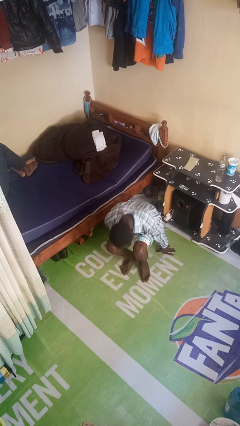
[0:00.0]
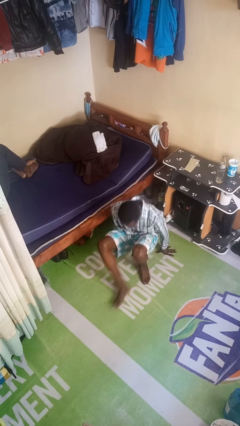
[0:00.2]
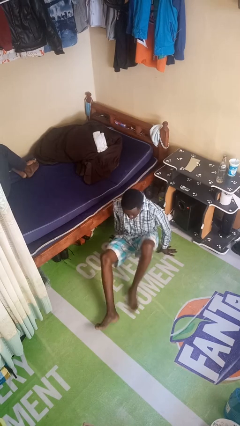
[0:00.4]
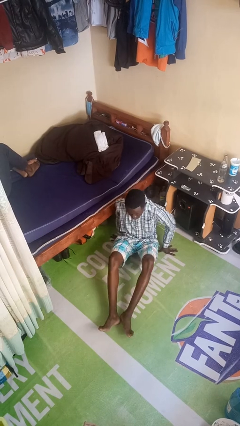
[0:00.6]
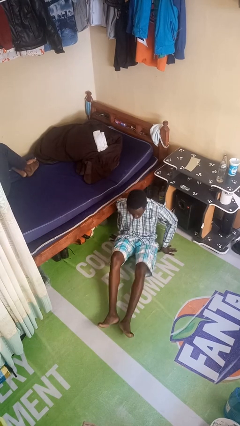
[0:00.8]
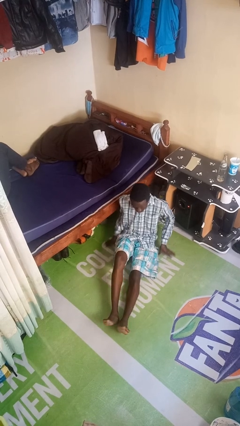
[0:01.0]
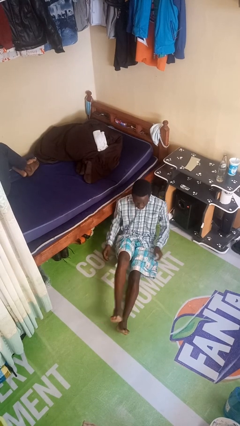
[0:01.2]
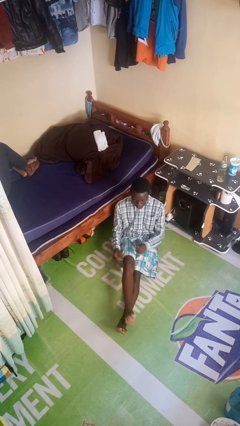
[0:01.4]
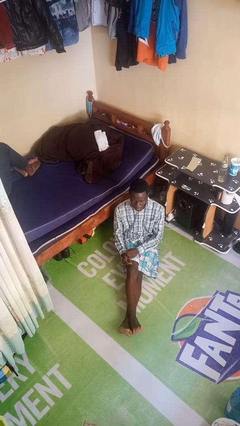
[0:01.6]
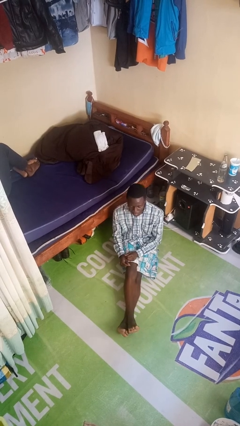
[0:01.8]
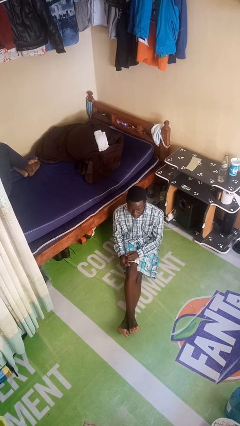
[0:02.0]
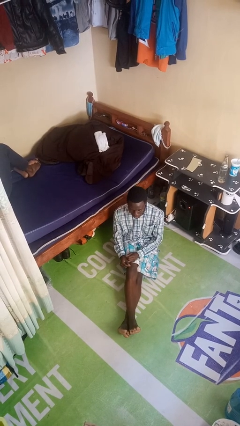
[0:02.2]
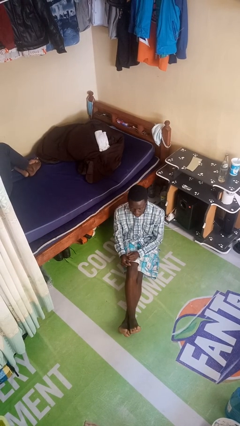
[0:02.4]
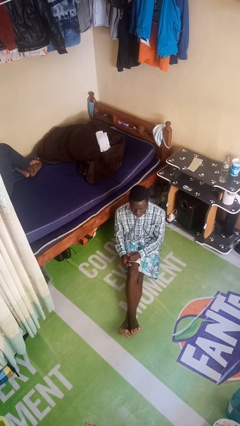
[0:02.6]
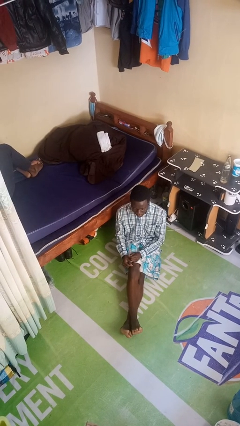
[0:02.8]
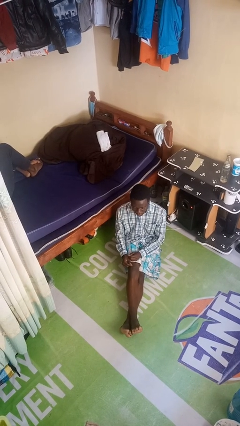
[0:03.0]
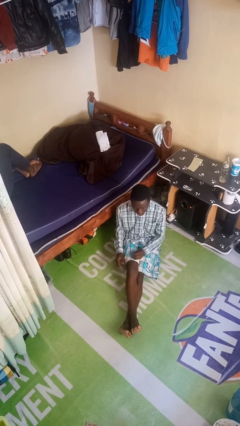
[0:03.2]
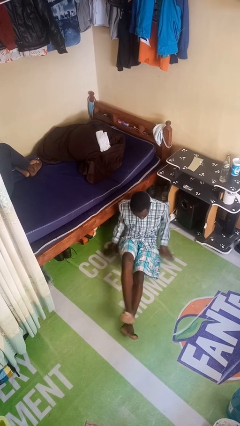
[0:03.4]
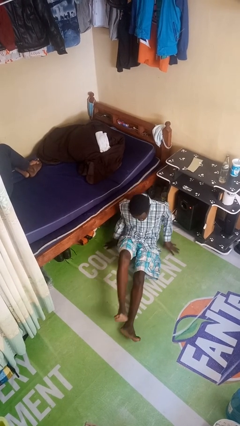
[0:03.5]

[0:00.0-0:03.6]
person sits crisscross

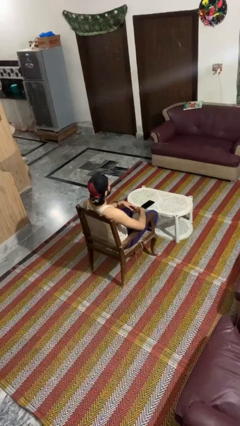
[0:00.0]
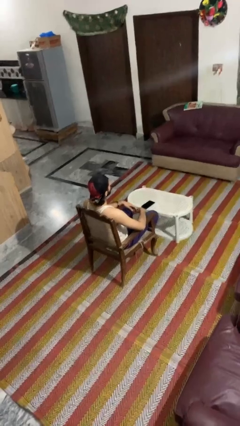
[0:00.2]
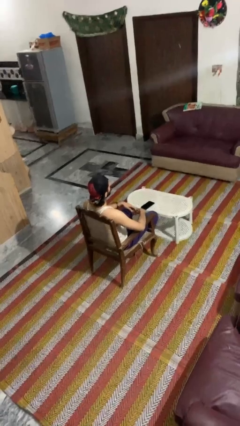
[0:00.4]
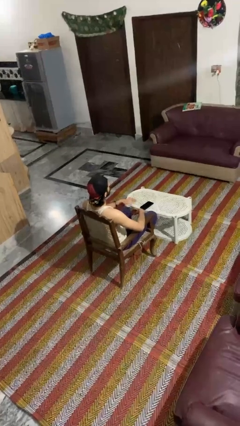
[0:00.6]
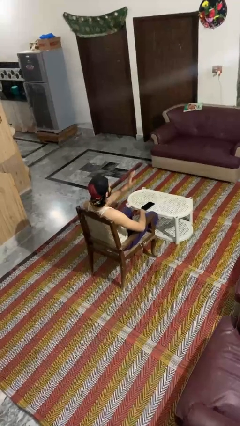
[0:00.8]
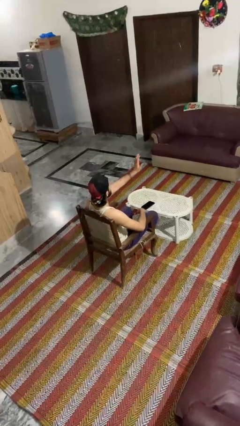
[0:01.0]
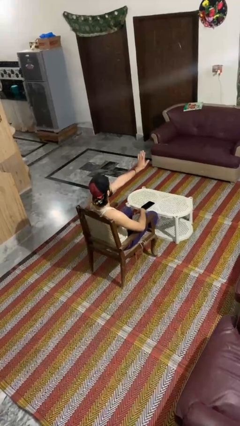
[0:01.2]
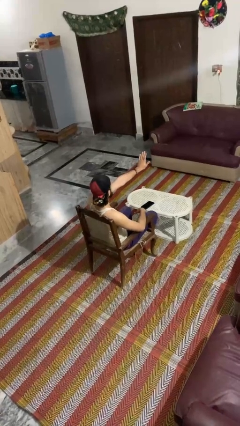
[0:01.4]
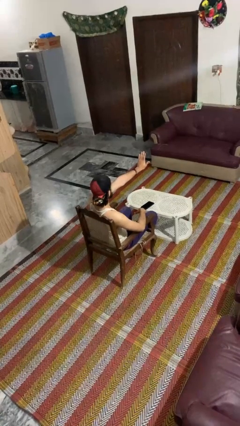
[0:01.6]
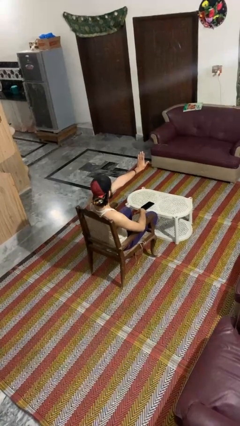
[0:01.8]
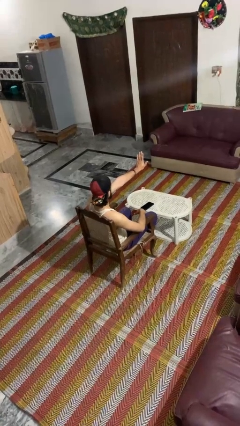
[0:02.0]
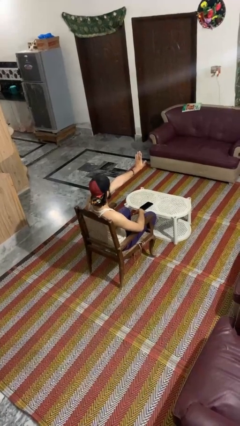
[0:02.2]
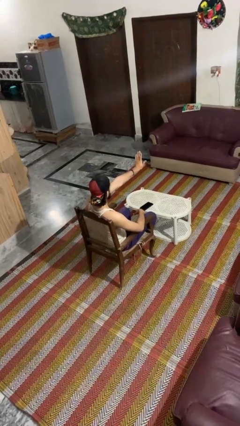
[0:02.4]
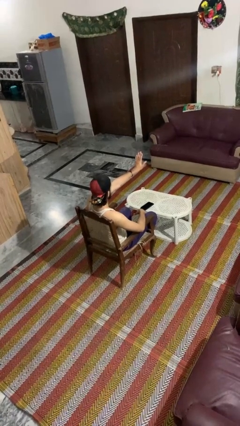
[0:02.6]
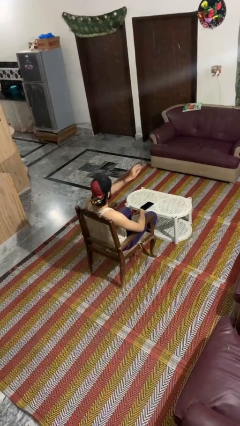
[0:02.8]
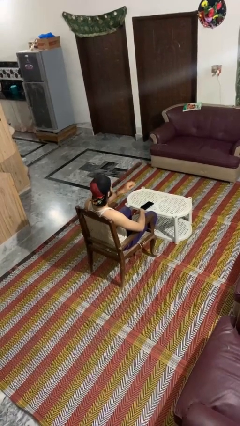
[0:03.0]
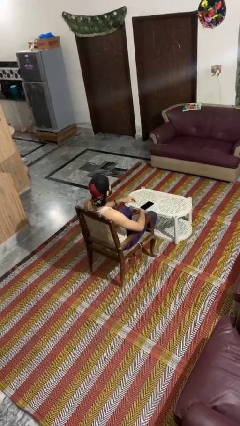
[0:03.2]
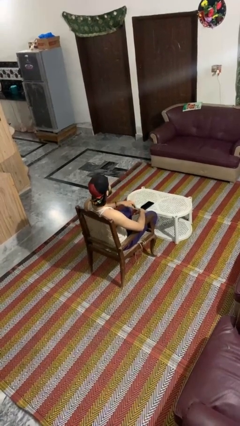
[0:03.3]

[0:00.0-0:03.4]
person gestures stop

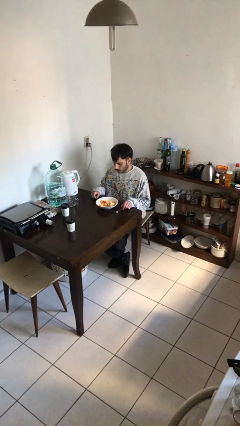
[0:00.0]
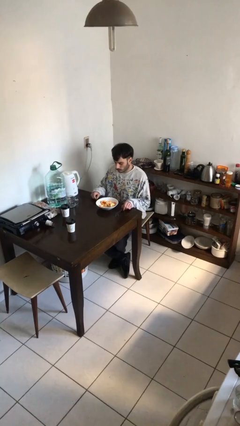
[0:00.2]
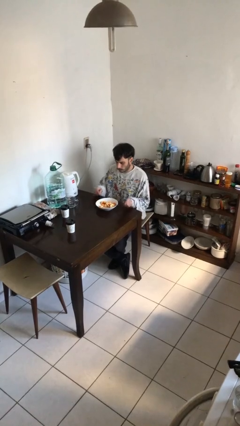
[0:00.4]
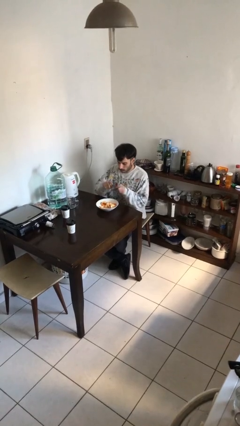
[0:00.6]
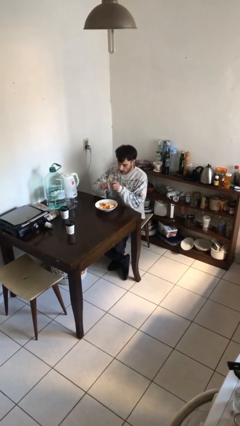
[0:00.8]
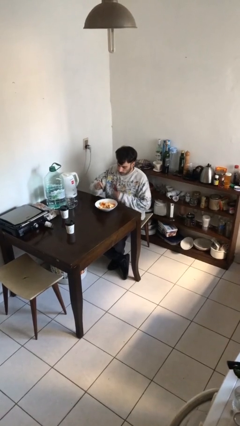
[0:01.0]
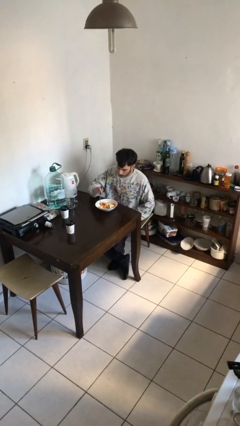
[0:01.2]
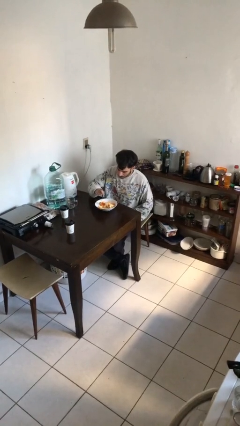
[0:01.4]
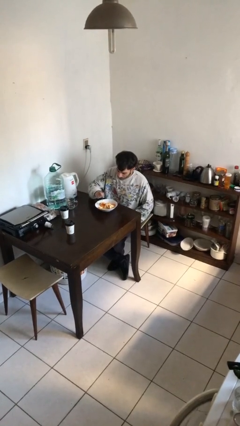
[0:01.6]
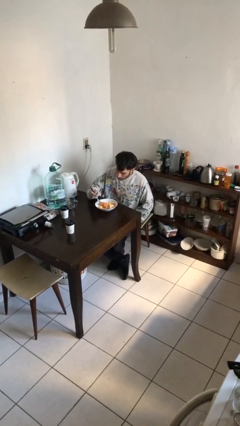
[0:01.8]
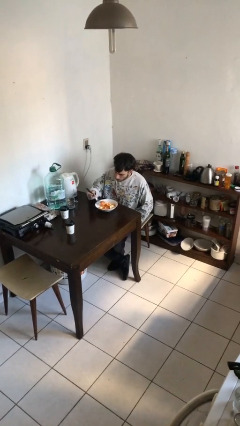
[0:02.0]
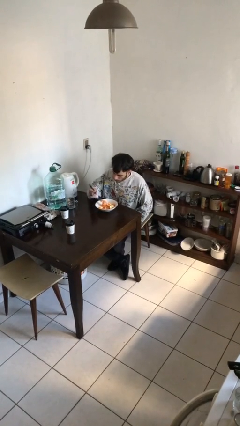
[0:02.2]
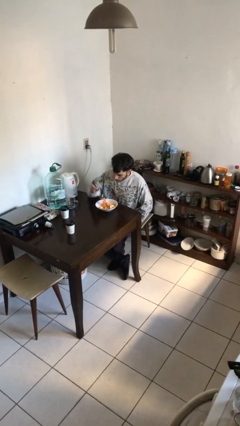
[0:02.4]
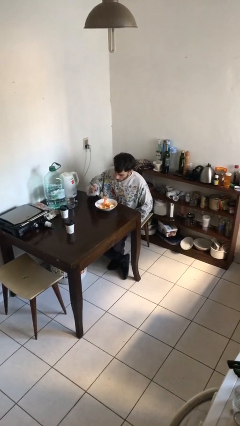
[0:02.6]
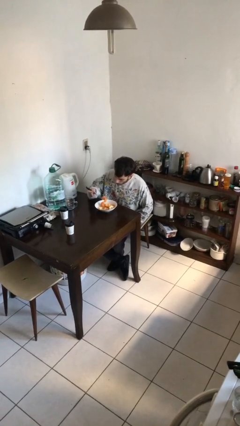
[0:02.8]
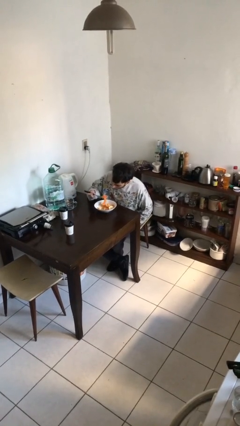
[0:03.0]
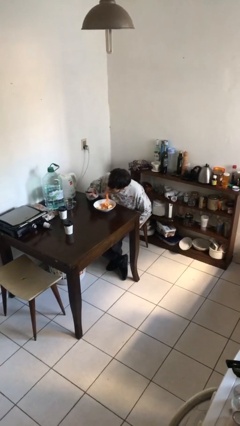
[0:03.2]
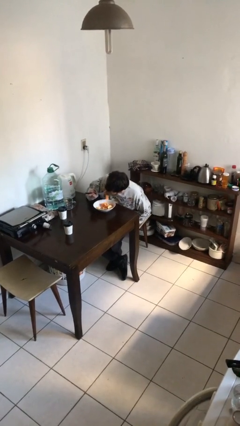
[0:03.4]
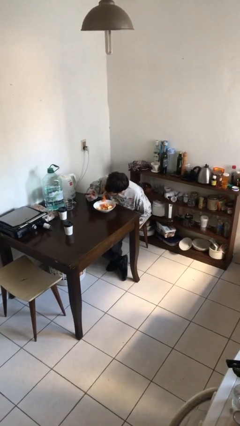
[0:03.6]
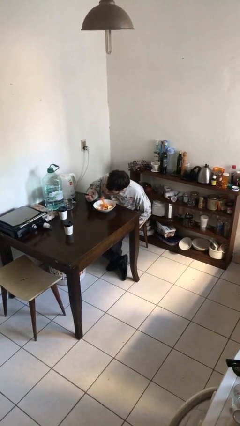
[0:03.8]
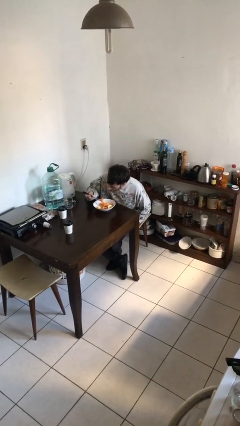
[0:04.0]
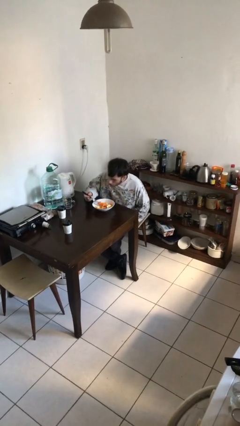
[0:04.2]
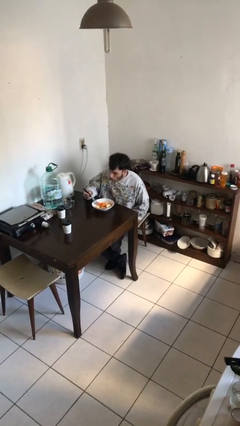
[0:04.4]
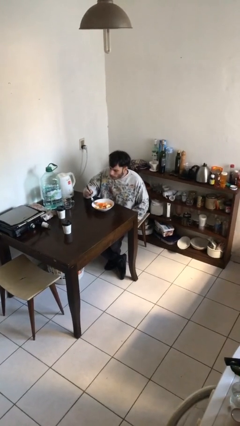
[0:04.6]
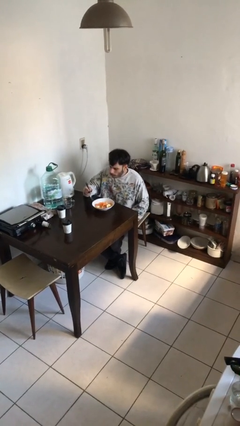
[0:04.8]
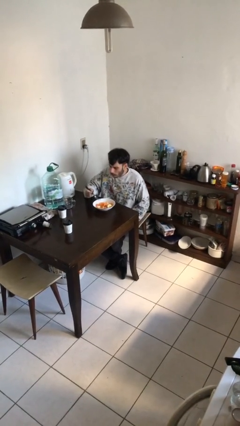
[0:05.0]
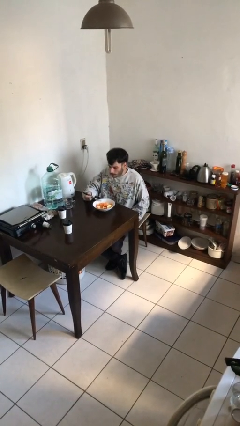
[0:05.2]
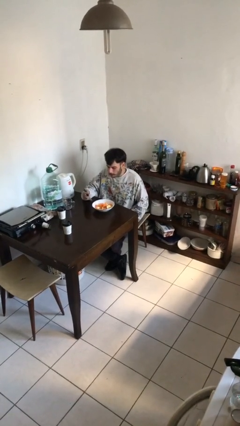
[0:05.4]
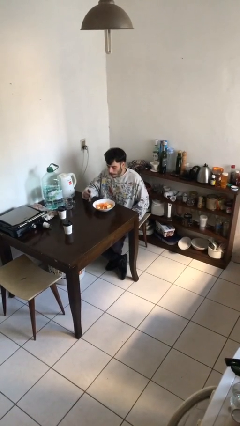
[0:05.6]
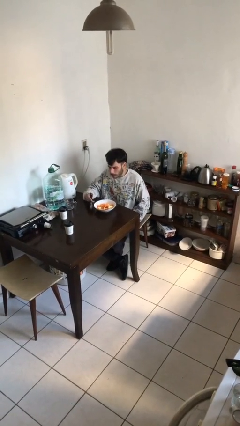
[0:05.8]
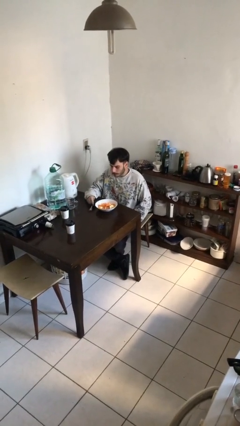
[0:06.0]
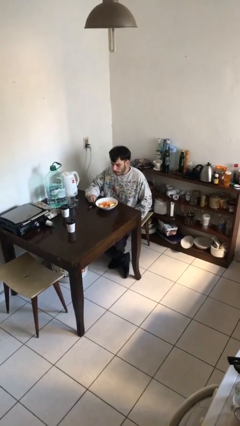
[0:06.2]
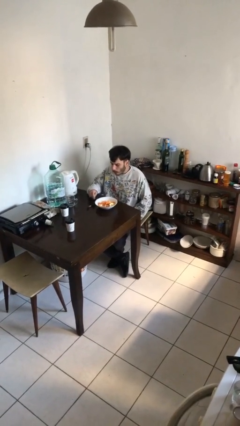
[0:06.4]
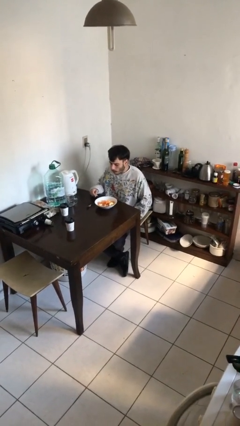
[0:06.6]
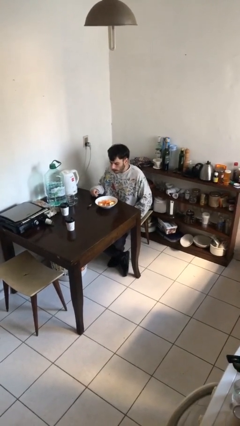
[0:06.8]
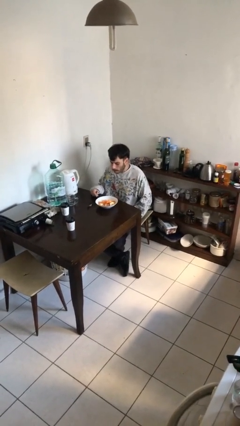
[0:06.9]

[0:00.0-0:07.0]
person eats with utensil

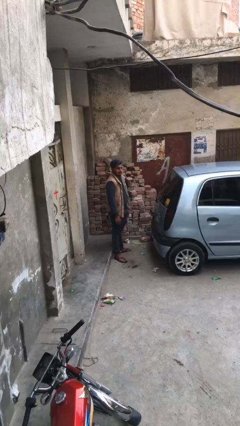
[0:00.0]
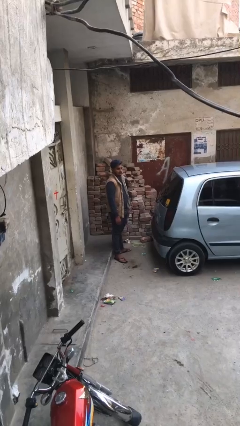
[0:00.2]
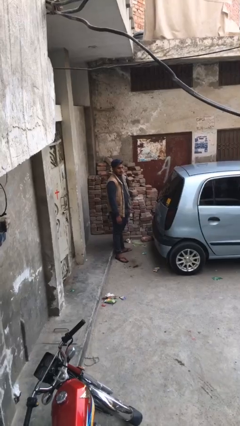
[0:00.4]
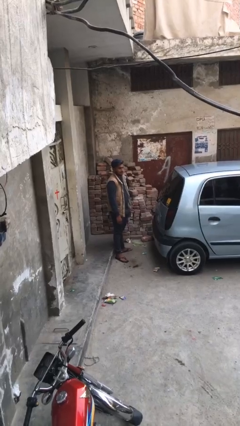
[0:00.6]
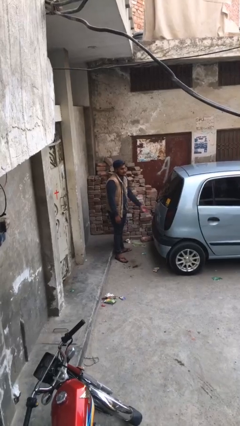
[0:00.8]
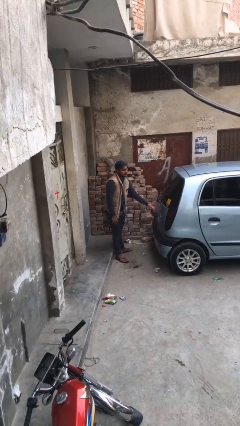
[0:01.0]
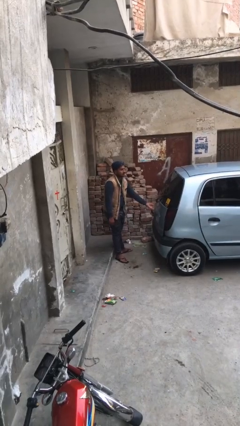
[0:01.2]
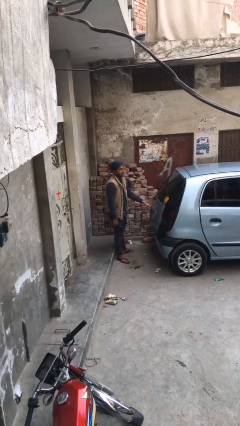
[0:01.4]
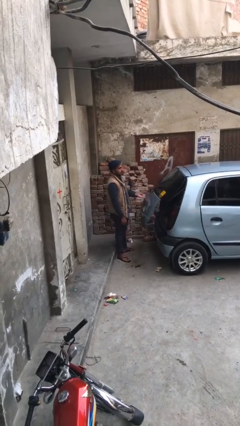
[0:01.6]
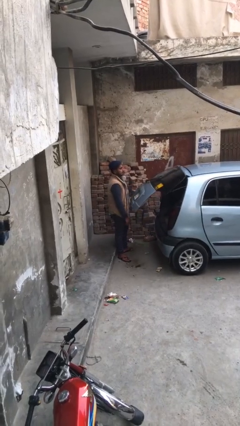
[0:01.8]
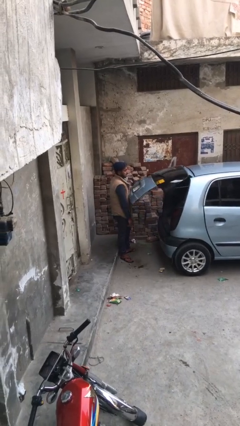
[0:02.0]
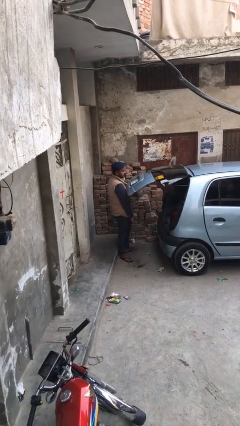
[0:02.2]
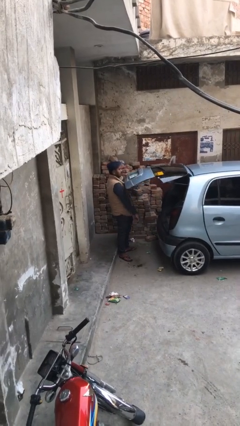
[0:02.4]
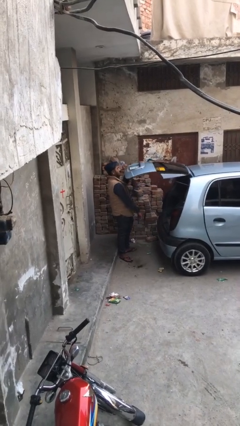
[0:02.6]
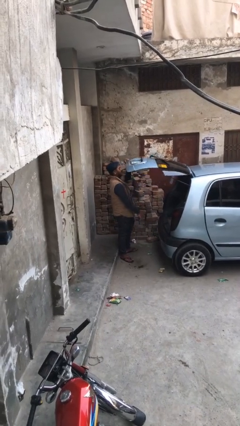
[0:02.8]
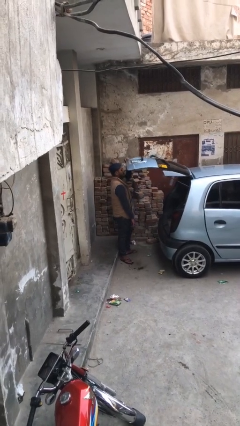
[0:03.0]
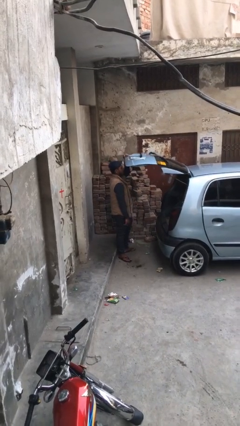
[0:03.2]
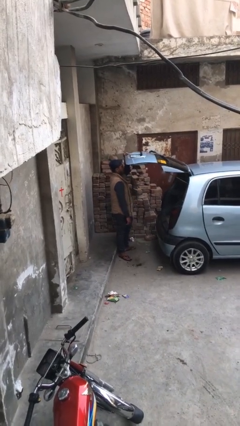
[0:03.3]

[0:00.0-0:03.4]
person opens car trunk
